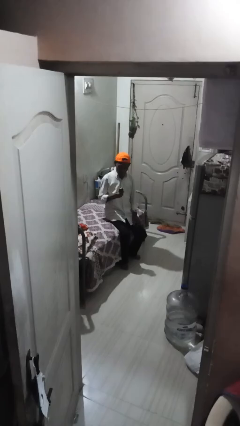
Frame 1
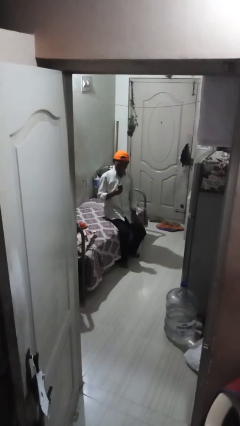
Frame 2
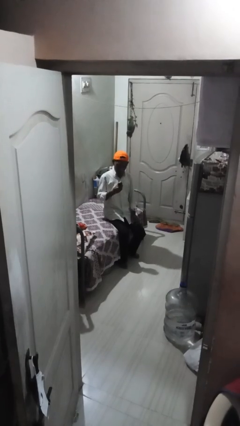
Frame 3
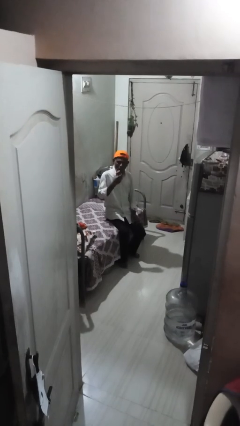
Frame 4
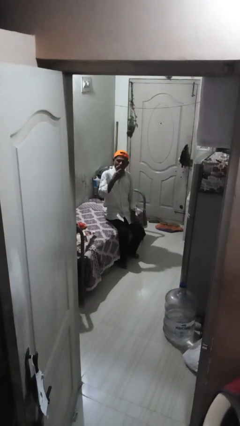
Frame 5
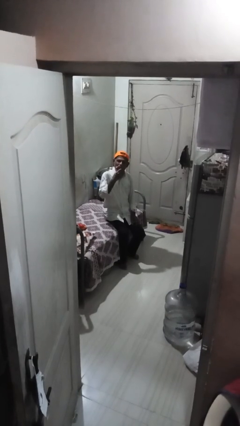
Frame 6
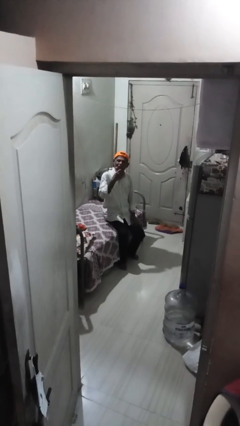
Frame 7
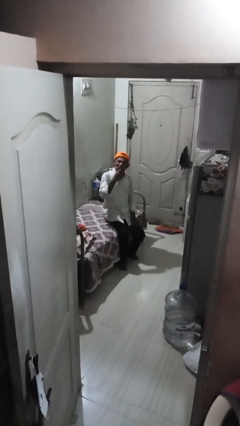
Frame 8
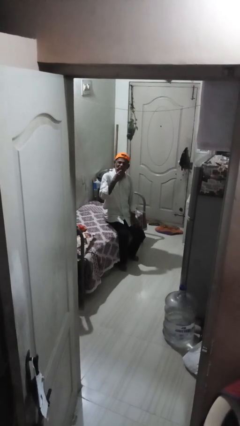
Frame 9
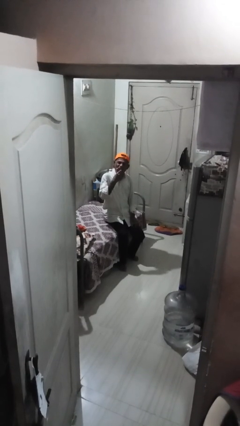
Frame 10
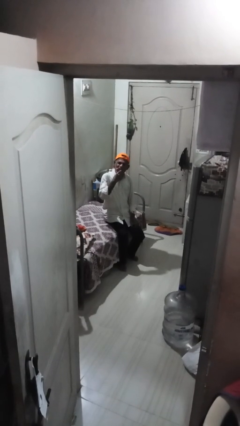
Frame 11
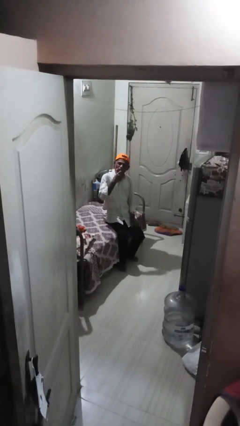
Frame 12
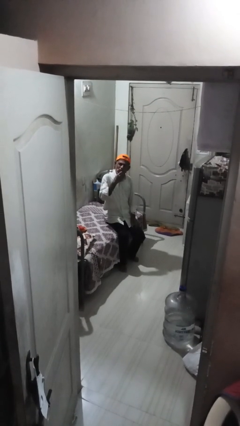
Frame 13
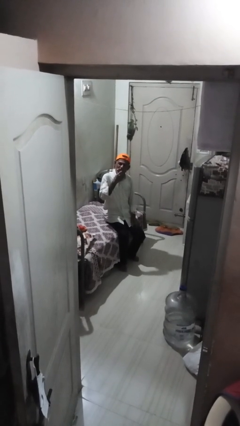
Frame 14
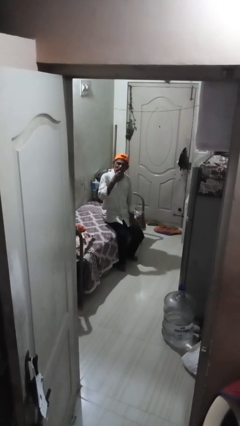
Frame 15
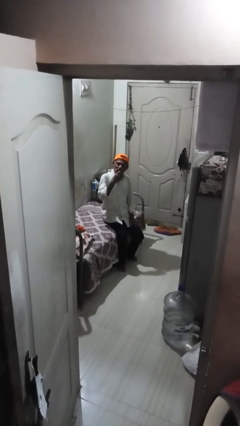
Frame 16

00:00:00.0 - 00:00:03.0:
person eats apple

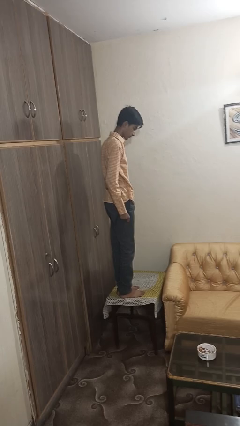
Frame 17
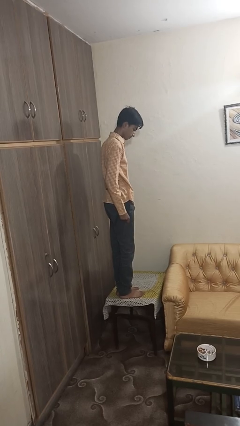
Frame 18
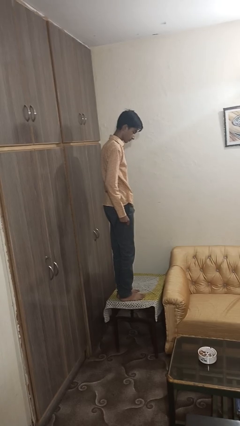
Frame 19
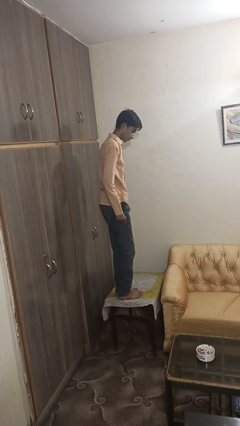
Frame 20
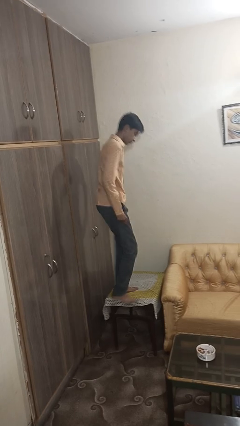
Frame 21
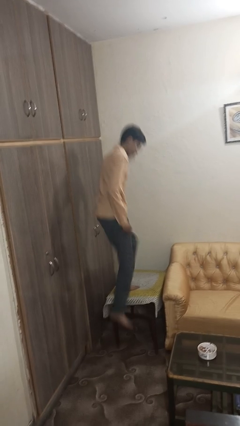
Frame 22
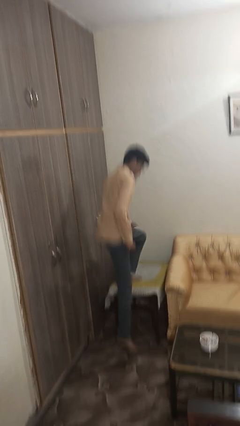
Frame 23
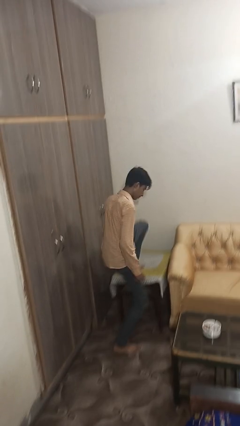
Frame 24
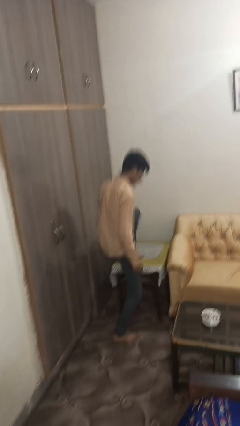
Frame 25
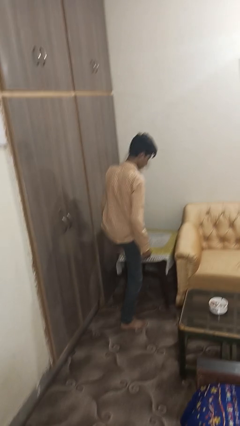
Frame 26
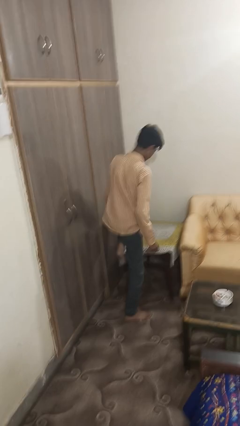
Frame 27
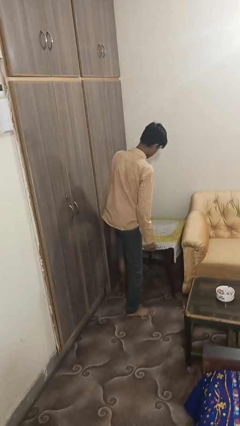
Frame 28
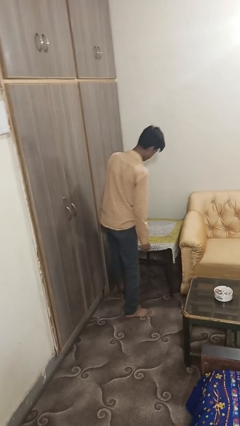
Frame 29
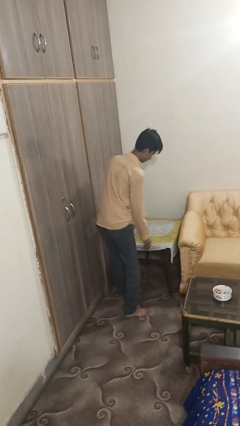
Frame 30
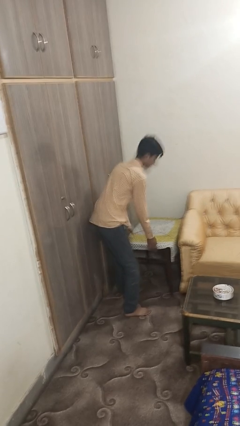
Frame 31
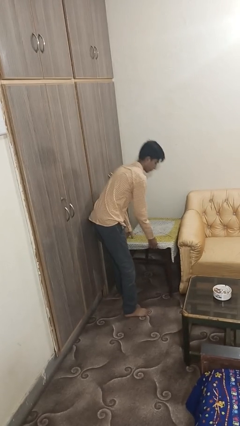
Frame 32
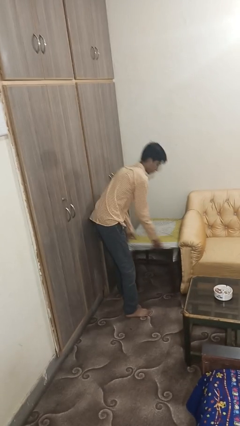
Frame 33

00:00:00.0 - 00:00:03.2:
person climbs off table

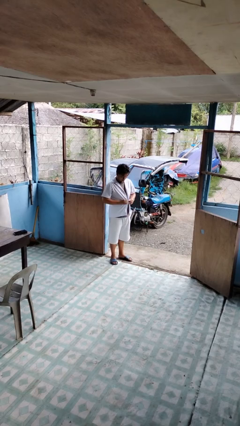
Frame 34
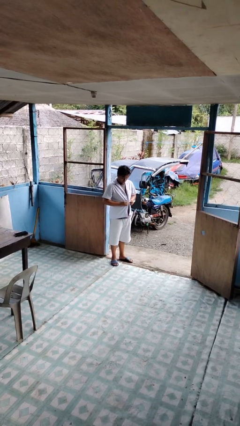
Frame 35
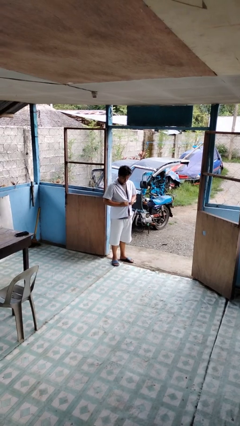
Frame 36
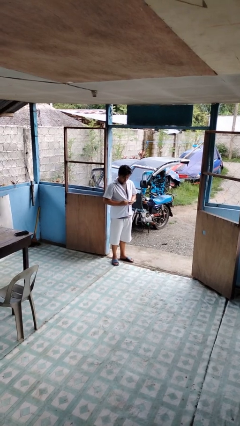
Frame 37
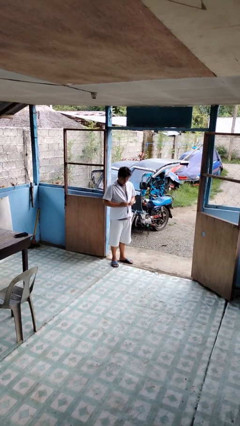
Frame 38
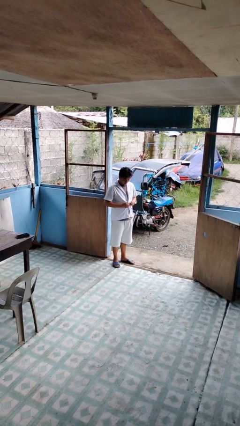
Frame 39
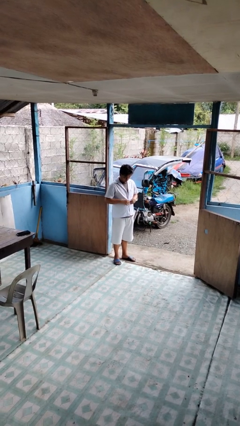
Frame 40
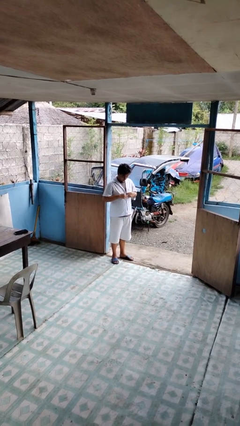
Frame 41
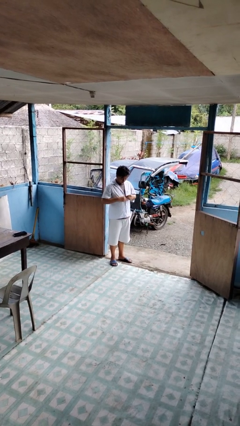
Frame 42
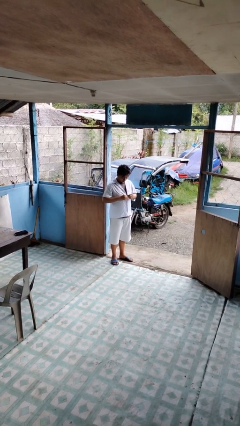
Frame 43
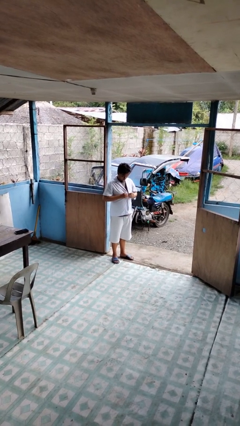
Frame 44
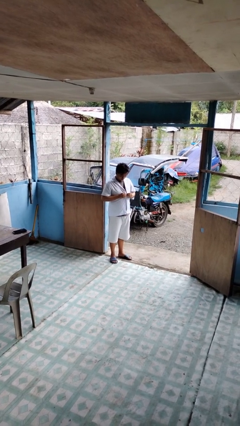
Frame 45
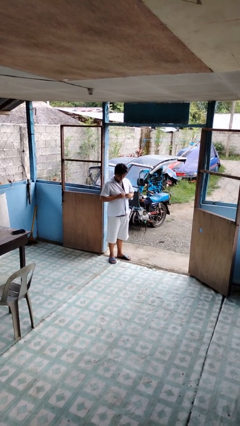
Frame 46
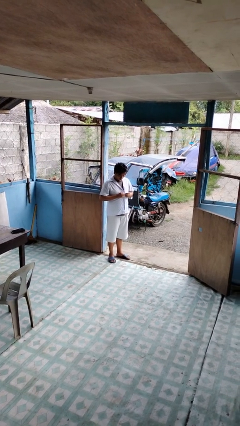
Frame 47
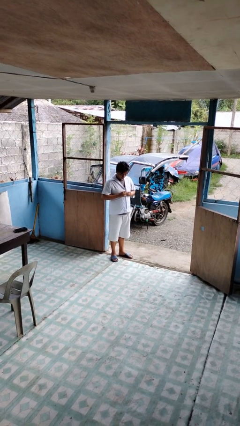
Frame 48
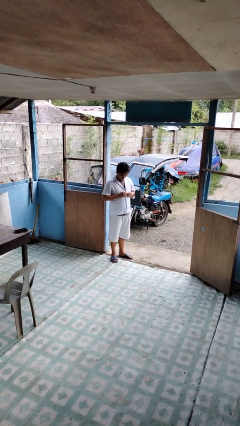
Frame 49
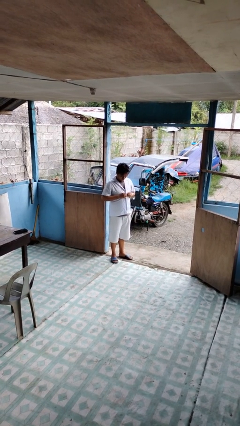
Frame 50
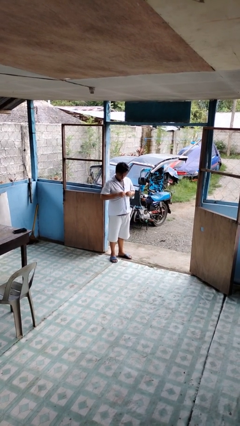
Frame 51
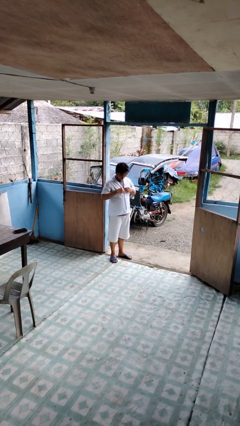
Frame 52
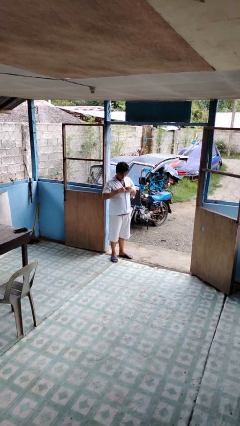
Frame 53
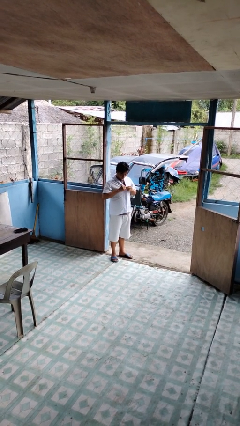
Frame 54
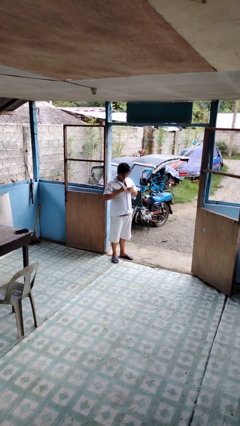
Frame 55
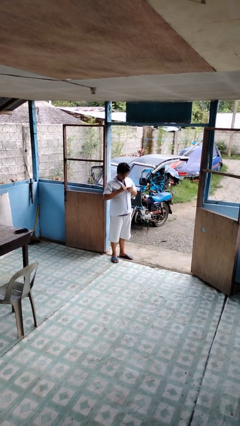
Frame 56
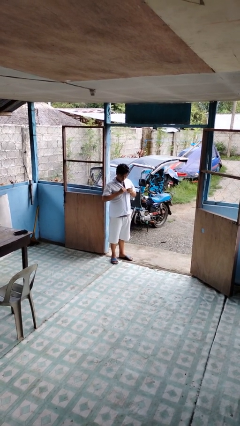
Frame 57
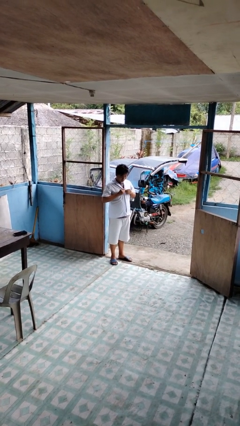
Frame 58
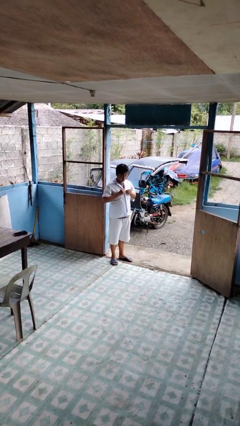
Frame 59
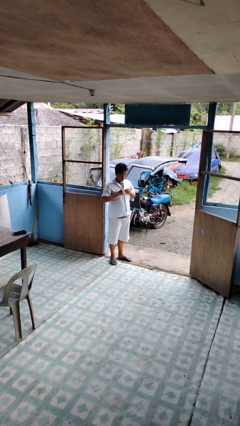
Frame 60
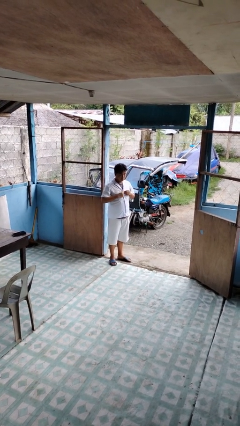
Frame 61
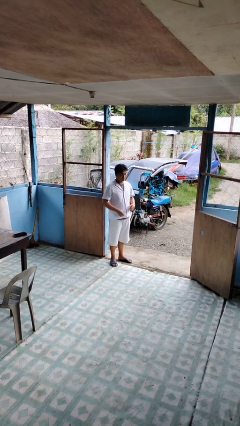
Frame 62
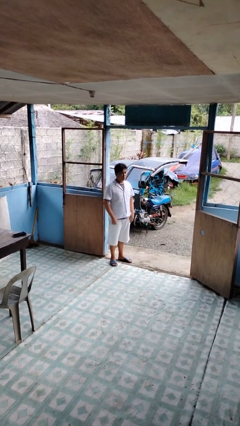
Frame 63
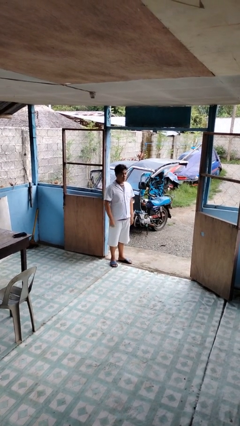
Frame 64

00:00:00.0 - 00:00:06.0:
person buttons shirt

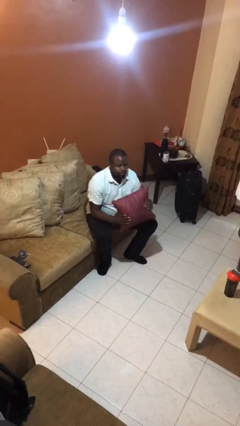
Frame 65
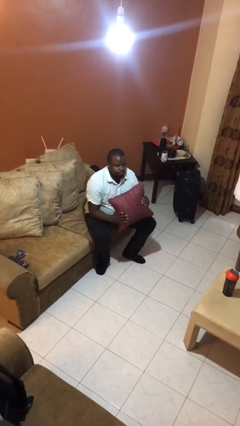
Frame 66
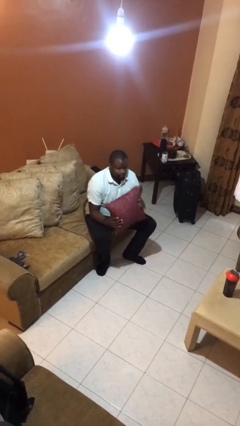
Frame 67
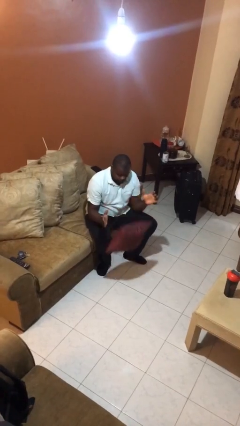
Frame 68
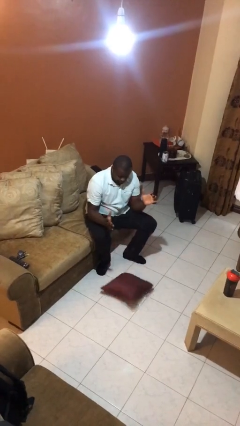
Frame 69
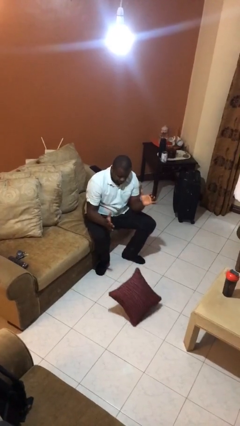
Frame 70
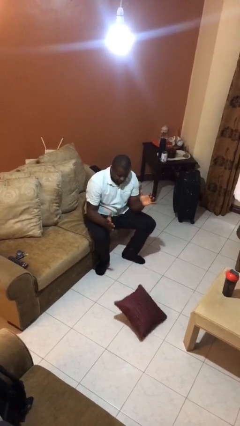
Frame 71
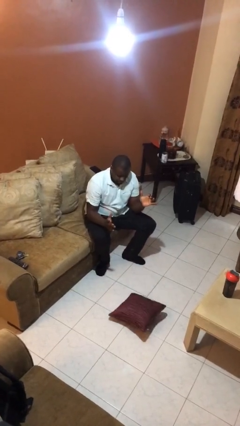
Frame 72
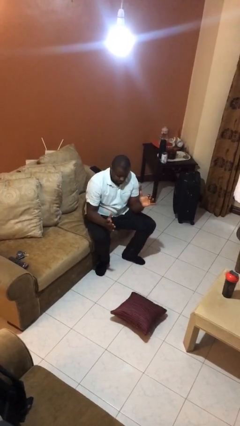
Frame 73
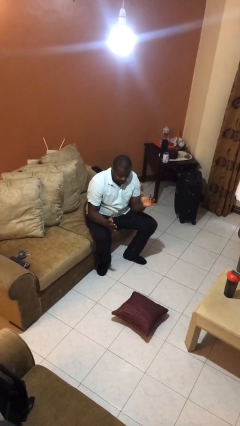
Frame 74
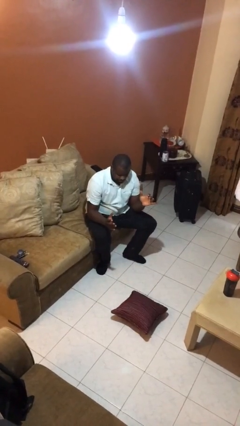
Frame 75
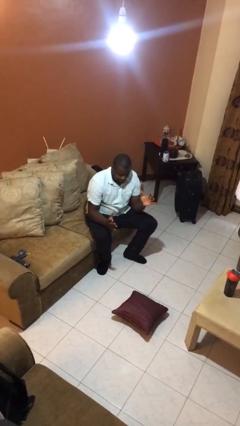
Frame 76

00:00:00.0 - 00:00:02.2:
person drops object

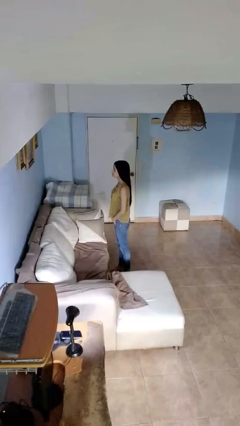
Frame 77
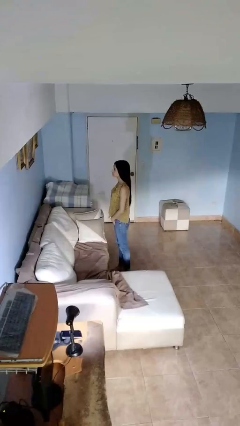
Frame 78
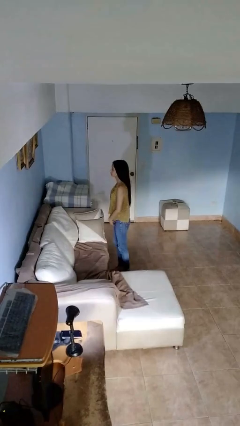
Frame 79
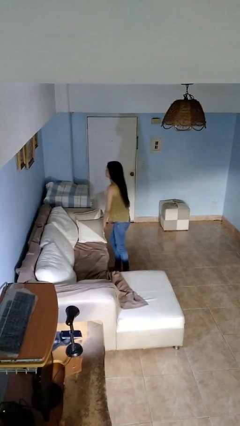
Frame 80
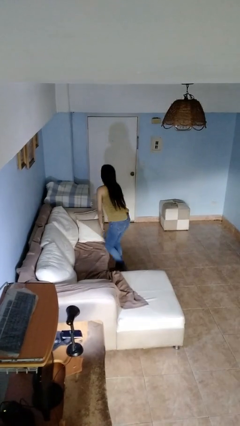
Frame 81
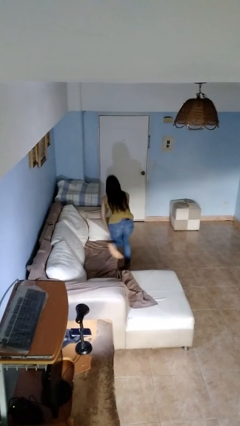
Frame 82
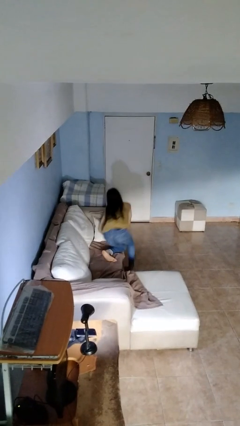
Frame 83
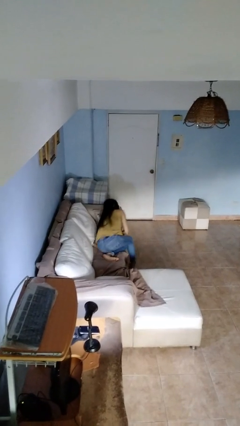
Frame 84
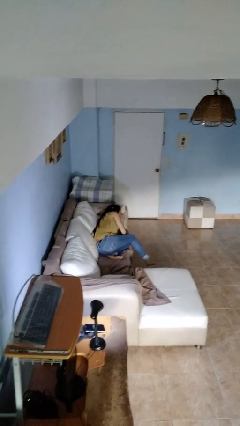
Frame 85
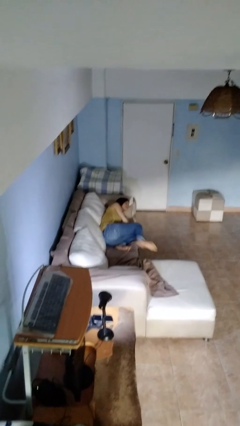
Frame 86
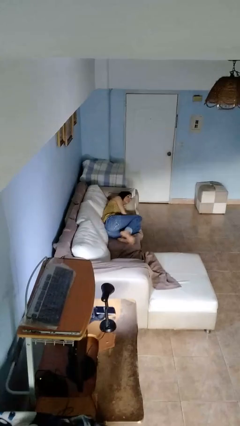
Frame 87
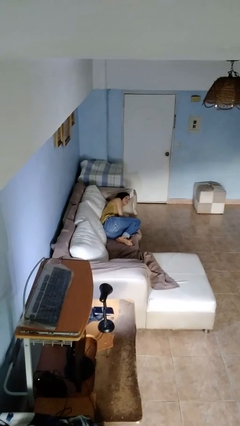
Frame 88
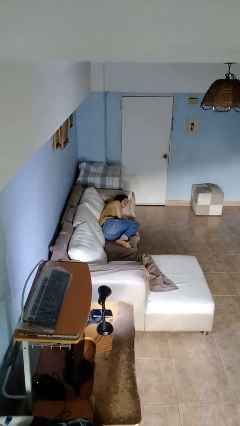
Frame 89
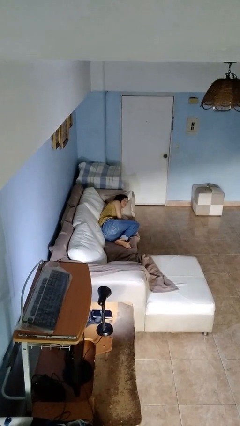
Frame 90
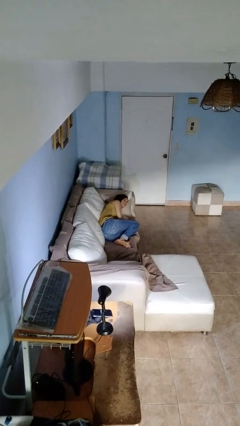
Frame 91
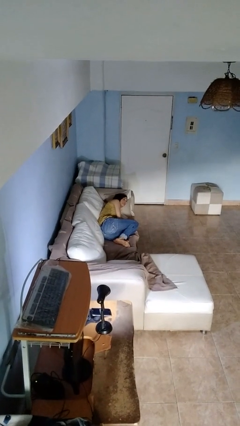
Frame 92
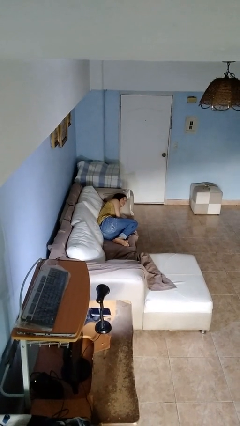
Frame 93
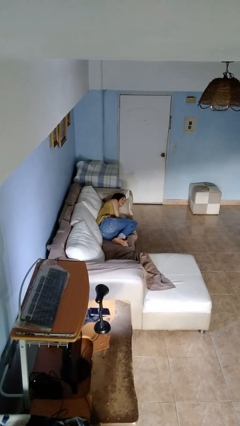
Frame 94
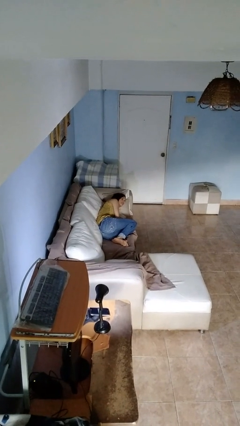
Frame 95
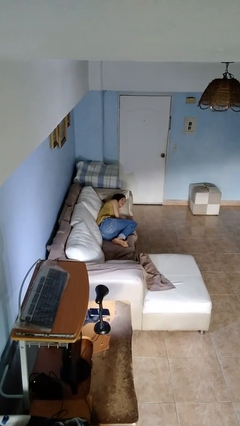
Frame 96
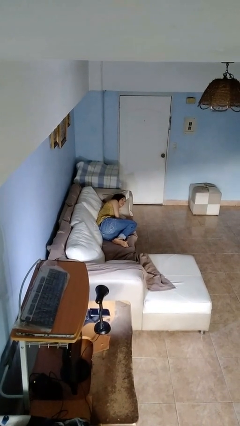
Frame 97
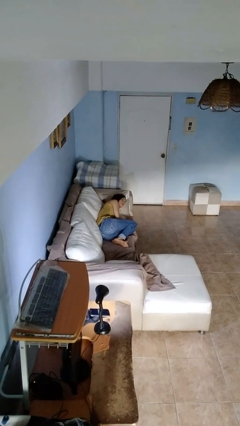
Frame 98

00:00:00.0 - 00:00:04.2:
person lies down on couch
